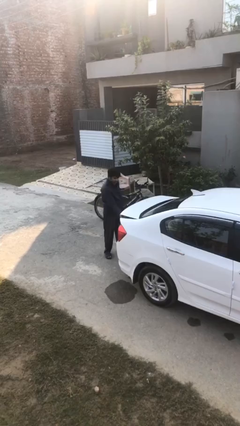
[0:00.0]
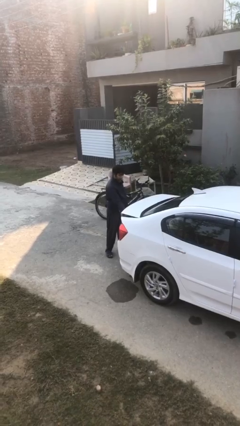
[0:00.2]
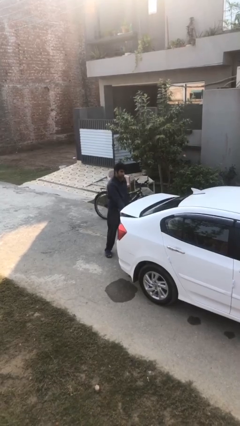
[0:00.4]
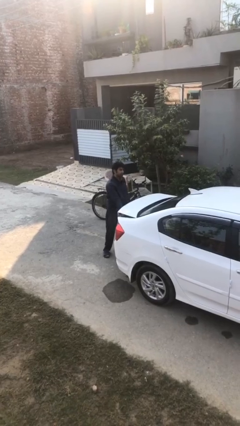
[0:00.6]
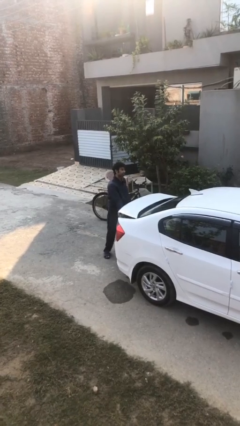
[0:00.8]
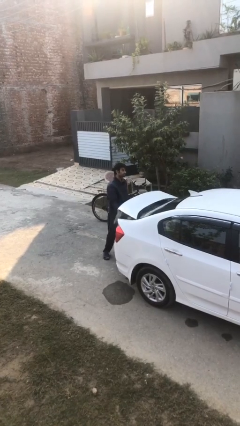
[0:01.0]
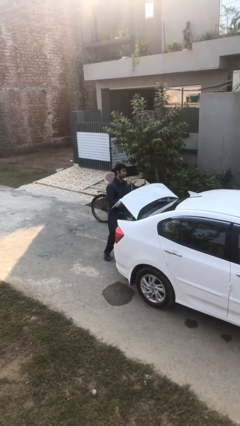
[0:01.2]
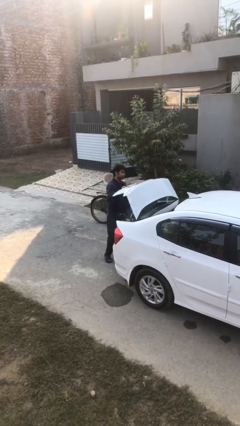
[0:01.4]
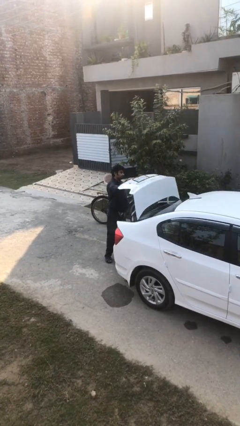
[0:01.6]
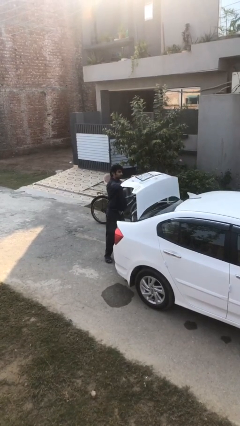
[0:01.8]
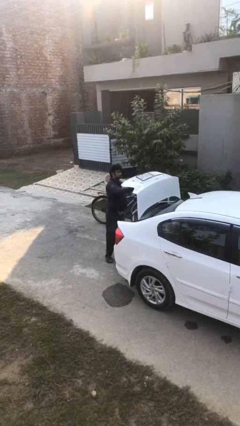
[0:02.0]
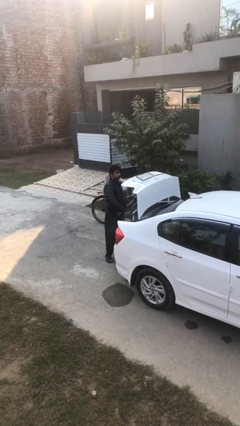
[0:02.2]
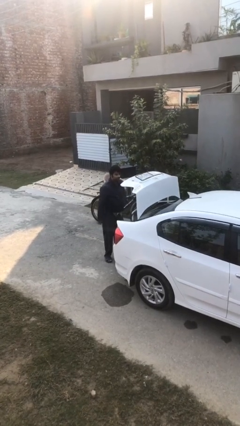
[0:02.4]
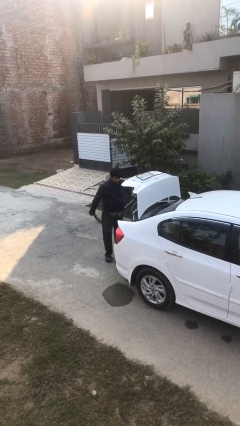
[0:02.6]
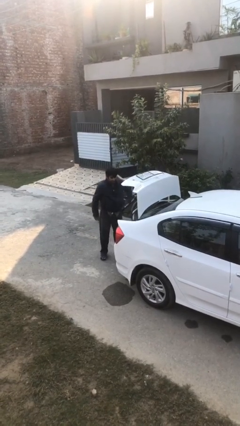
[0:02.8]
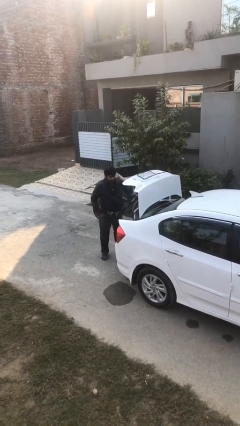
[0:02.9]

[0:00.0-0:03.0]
person opens car trunk

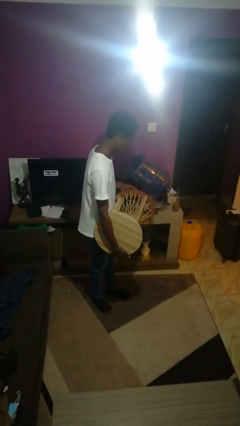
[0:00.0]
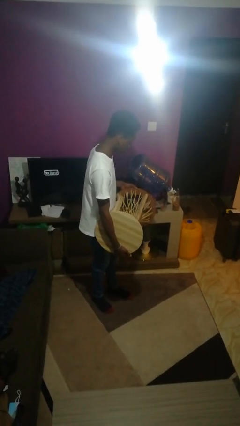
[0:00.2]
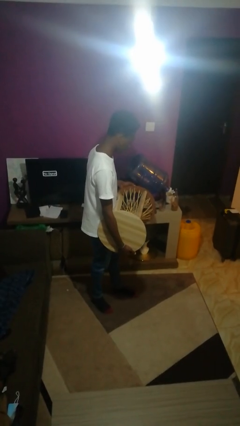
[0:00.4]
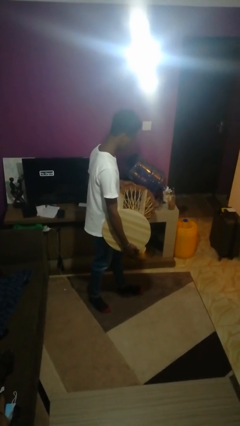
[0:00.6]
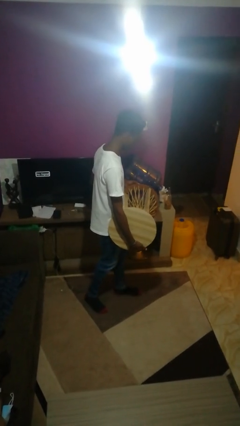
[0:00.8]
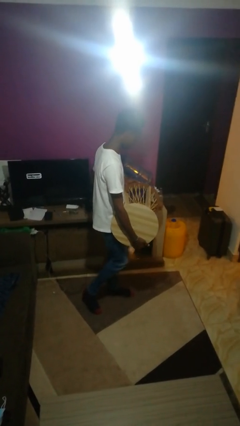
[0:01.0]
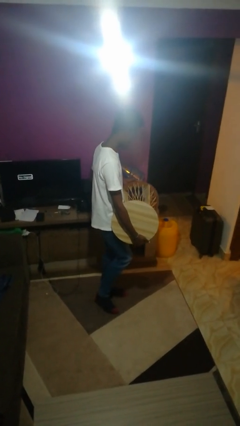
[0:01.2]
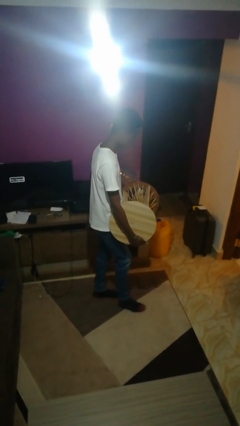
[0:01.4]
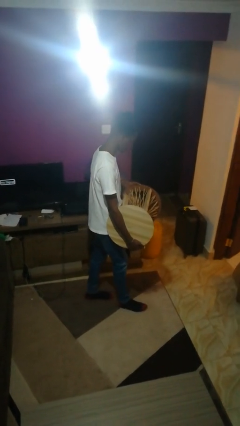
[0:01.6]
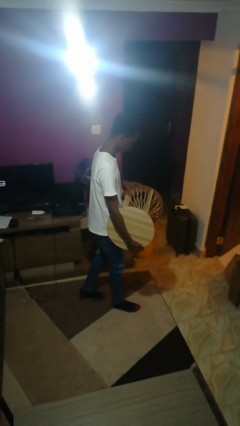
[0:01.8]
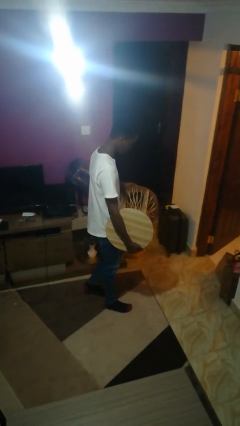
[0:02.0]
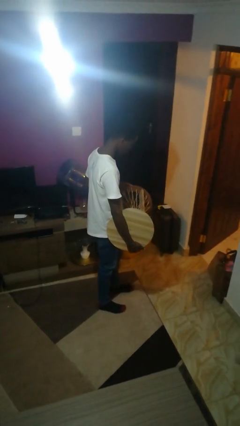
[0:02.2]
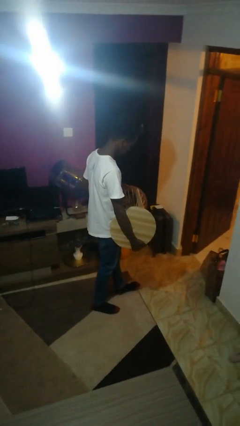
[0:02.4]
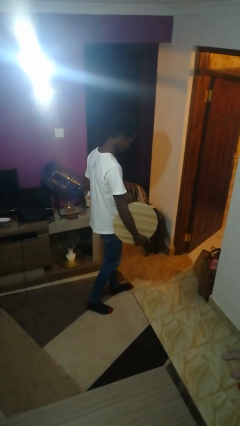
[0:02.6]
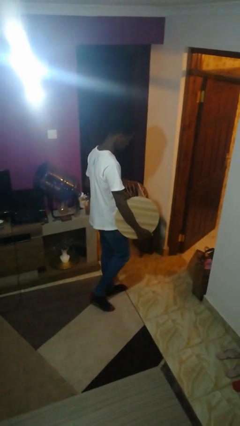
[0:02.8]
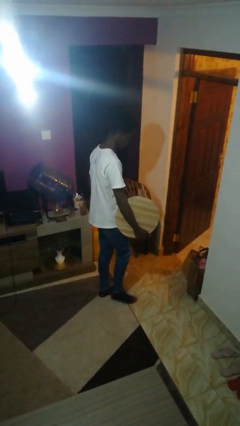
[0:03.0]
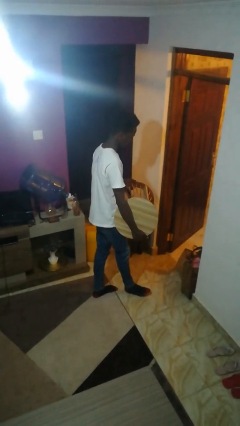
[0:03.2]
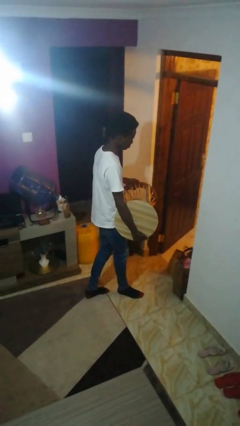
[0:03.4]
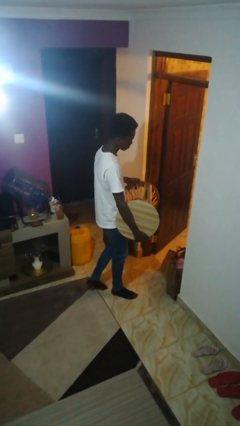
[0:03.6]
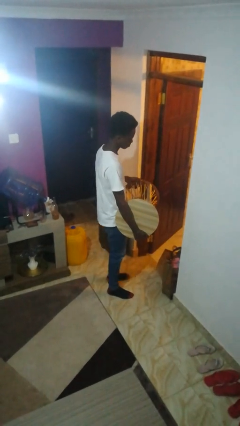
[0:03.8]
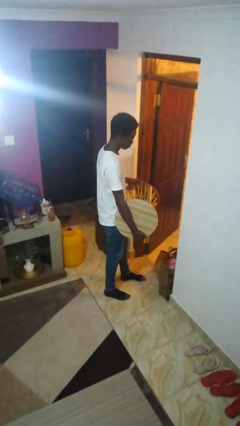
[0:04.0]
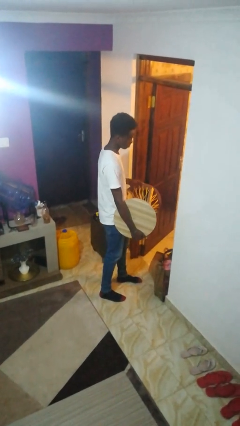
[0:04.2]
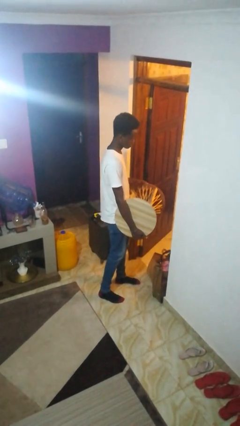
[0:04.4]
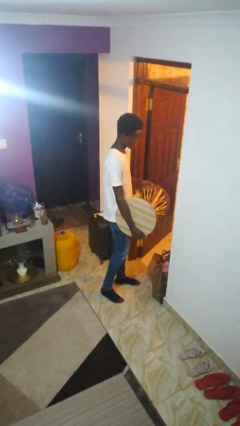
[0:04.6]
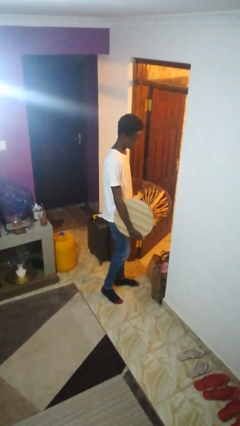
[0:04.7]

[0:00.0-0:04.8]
person carries furniture

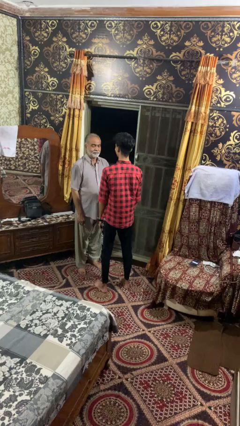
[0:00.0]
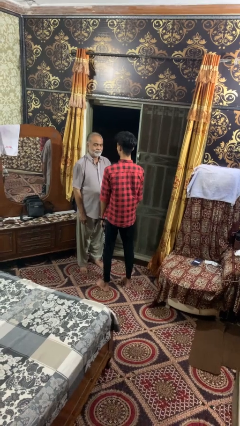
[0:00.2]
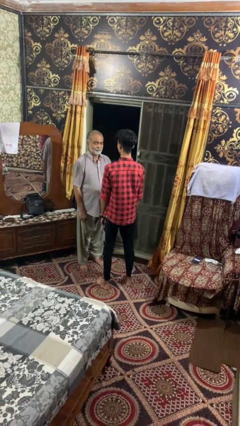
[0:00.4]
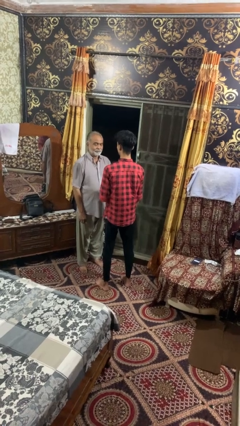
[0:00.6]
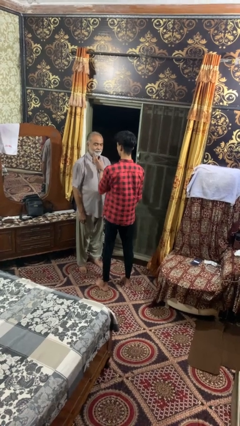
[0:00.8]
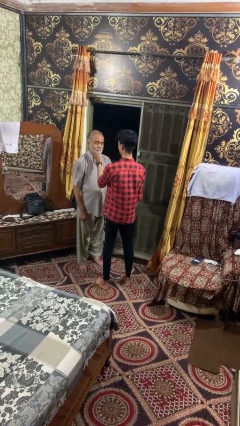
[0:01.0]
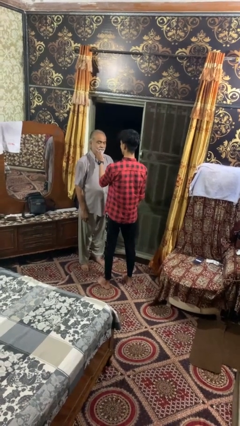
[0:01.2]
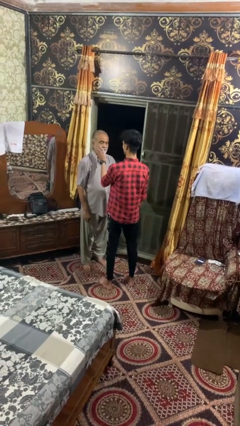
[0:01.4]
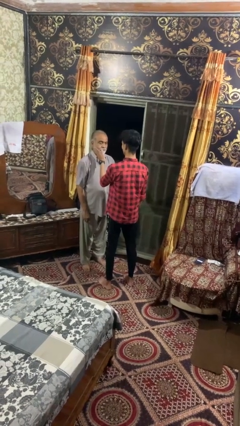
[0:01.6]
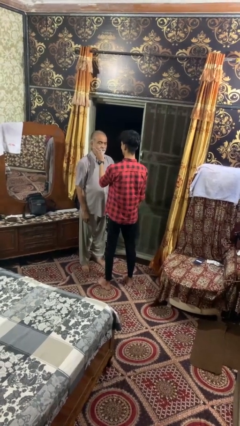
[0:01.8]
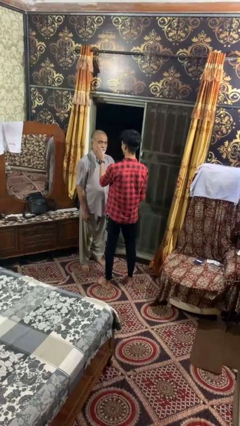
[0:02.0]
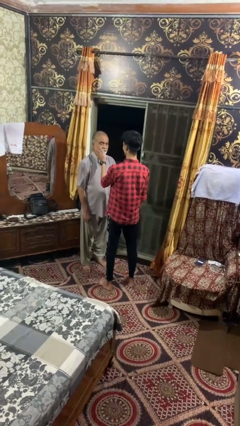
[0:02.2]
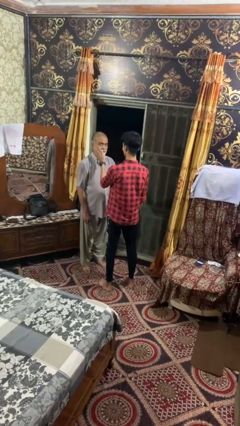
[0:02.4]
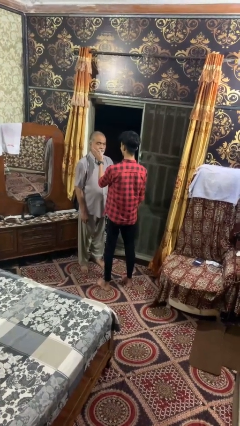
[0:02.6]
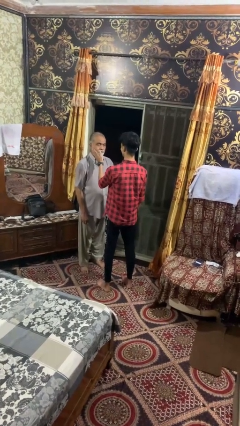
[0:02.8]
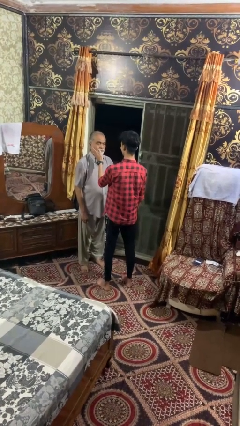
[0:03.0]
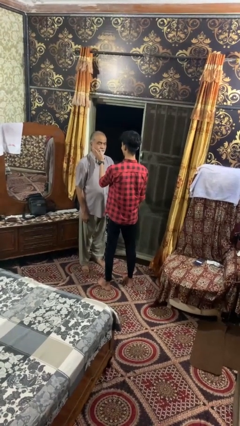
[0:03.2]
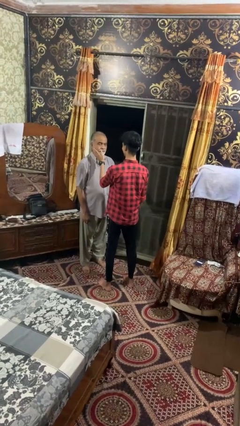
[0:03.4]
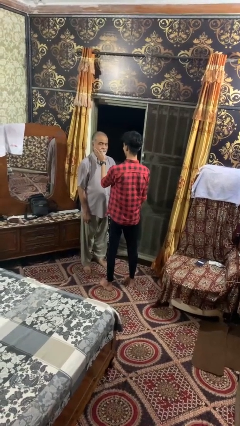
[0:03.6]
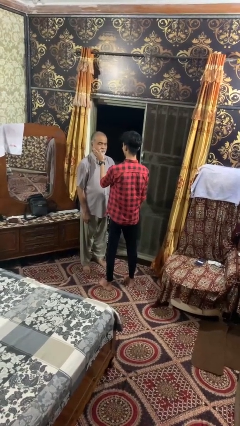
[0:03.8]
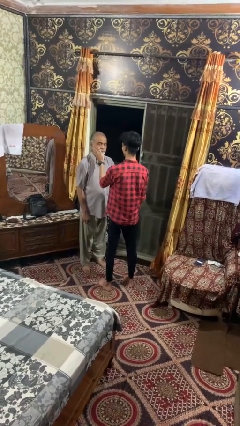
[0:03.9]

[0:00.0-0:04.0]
person touches face of person

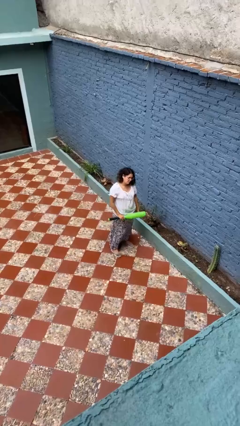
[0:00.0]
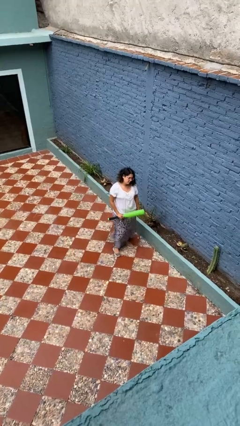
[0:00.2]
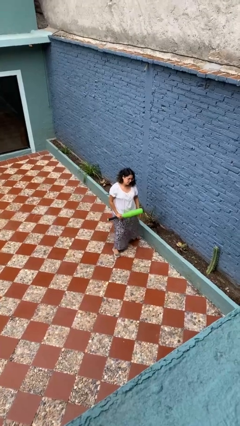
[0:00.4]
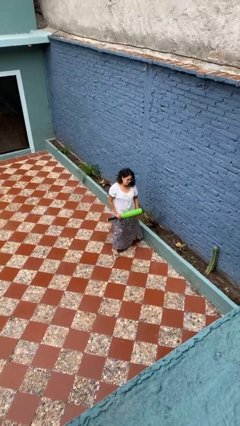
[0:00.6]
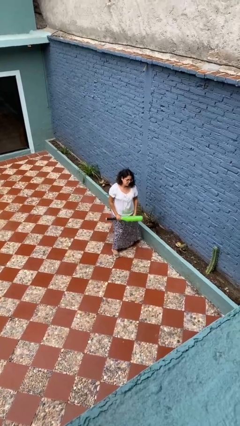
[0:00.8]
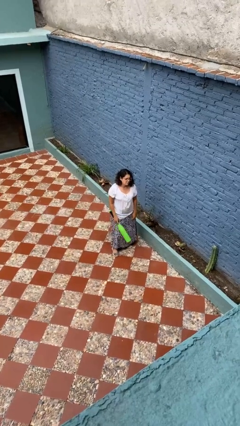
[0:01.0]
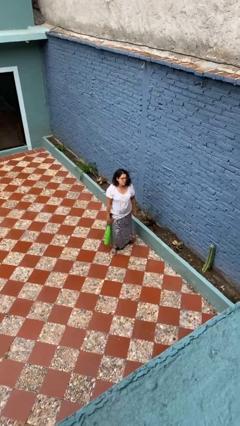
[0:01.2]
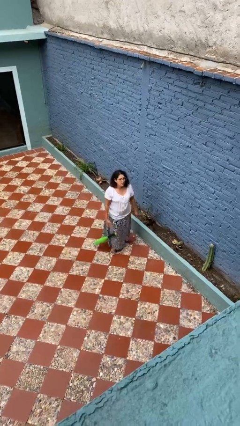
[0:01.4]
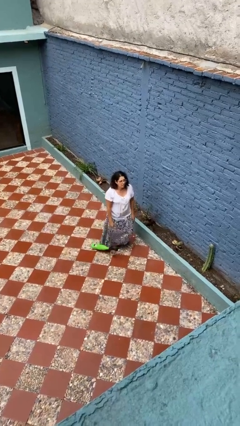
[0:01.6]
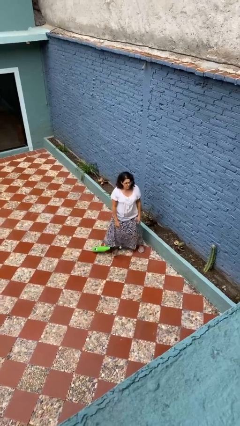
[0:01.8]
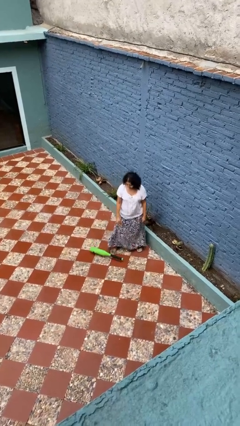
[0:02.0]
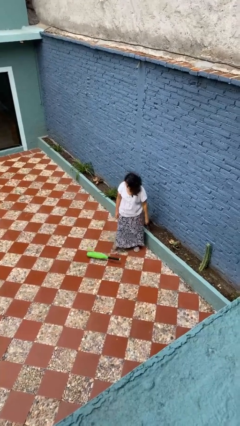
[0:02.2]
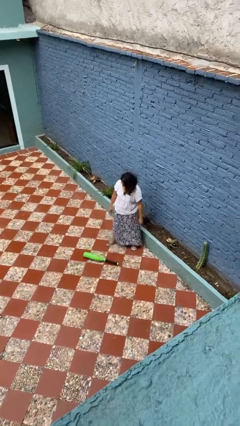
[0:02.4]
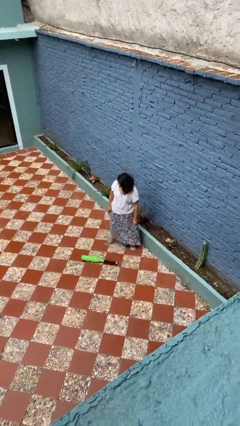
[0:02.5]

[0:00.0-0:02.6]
person drops object

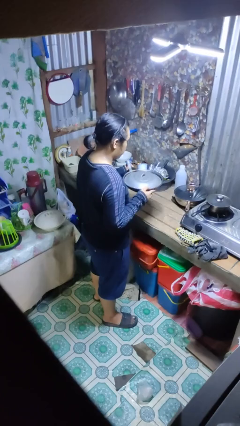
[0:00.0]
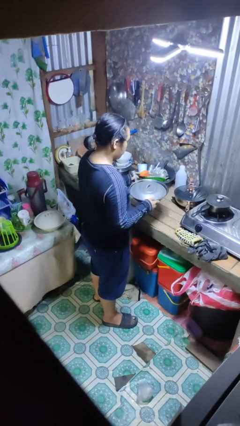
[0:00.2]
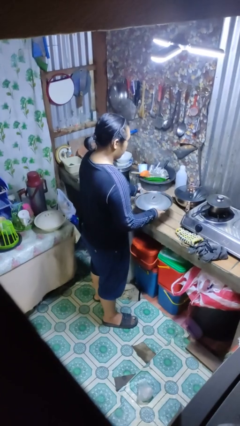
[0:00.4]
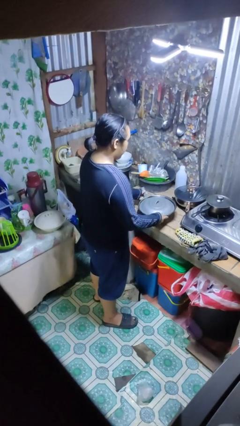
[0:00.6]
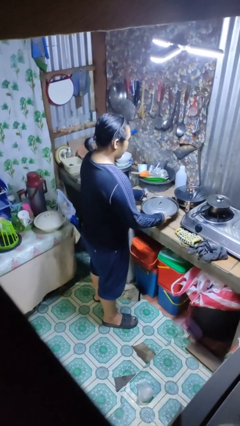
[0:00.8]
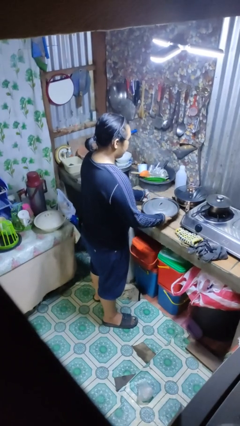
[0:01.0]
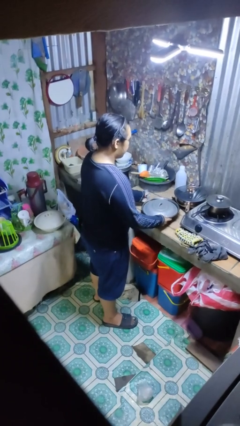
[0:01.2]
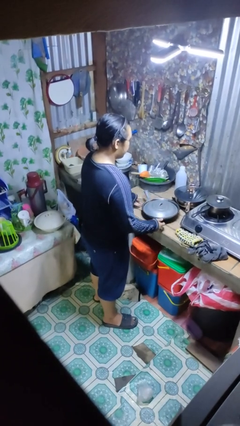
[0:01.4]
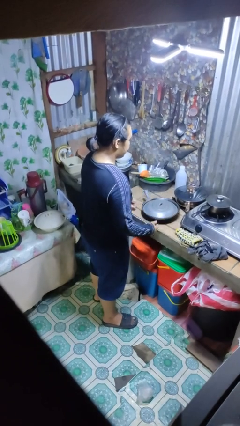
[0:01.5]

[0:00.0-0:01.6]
person puts down object on countertop

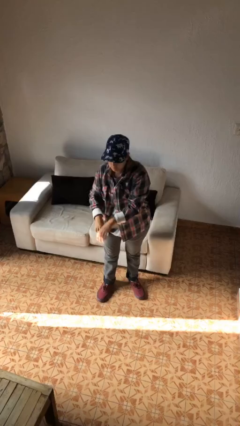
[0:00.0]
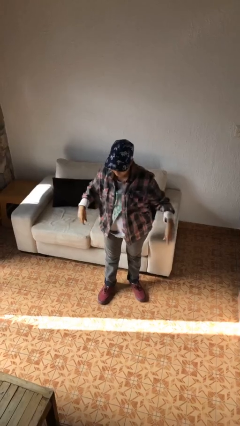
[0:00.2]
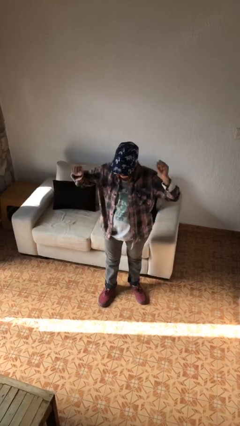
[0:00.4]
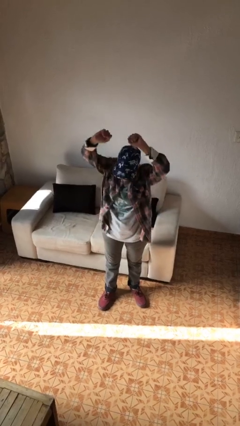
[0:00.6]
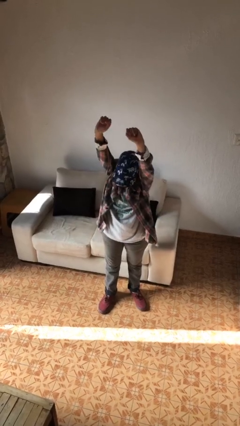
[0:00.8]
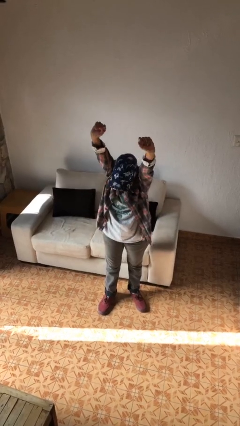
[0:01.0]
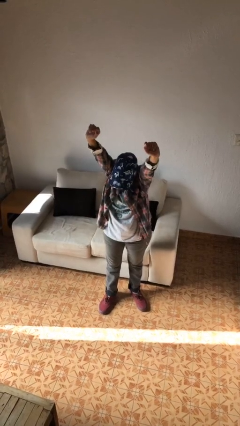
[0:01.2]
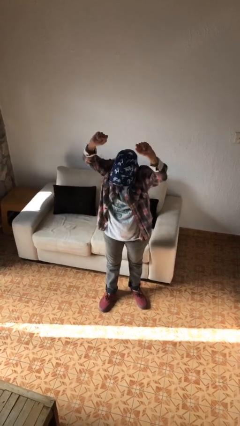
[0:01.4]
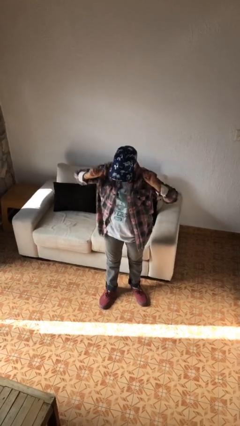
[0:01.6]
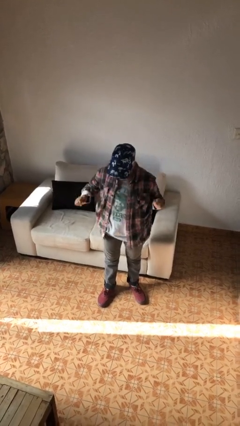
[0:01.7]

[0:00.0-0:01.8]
person stretches arms over head
